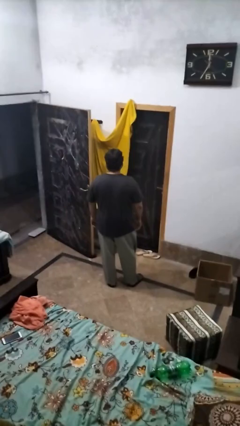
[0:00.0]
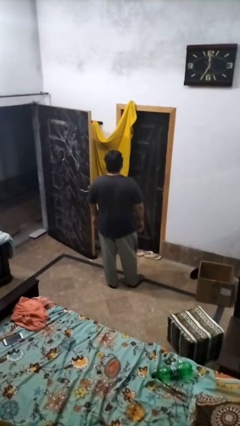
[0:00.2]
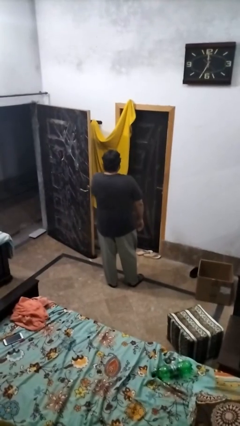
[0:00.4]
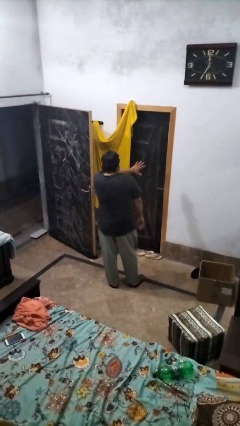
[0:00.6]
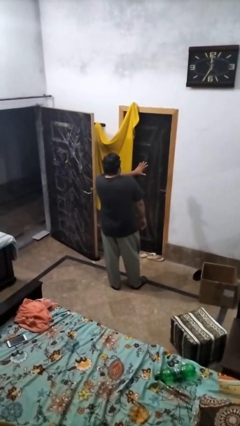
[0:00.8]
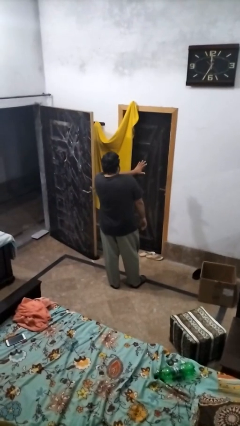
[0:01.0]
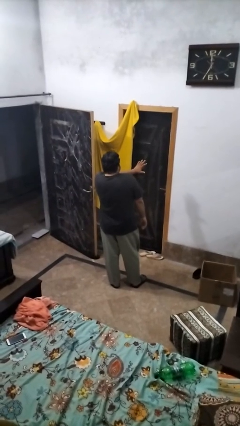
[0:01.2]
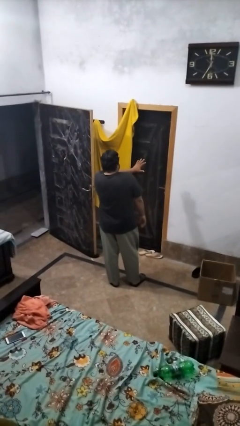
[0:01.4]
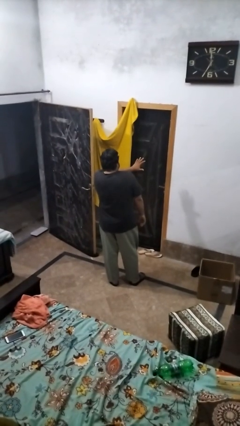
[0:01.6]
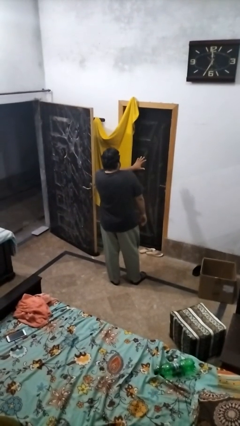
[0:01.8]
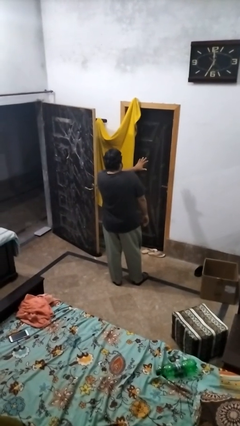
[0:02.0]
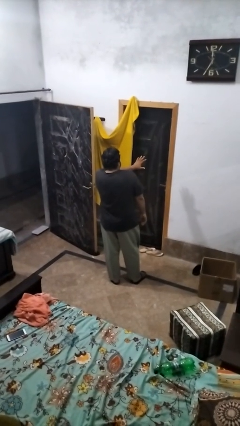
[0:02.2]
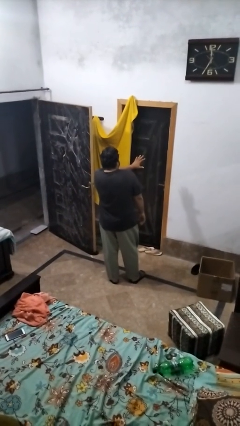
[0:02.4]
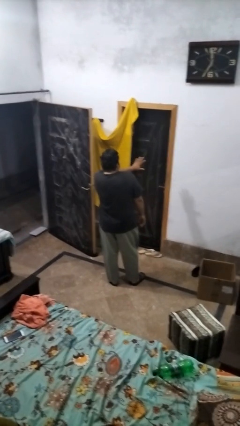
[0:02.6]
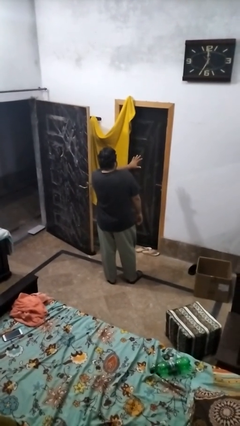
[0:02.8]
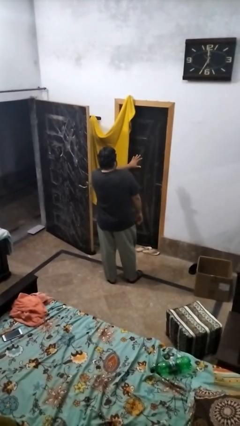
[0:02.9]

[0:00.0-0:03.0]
person gestures stop

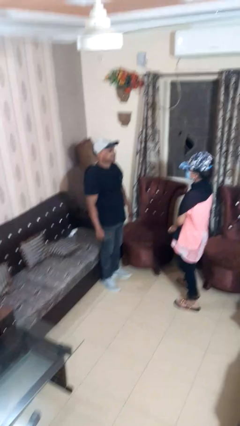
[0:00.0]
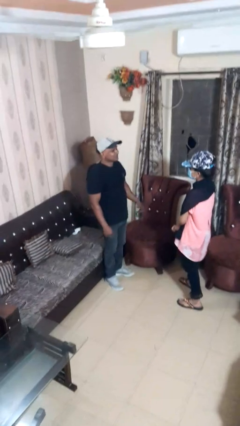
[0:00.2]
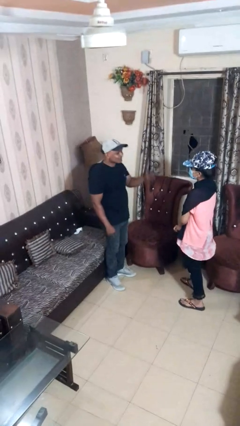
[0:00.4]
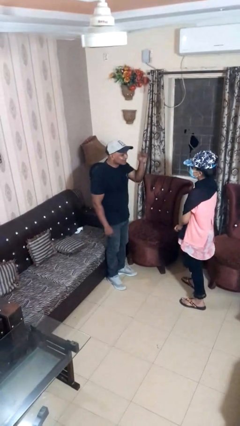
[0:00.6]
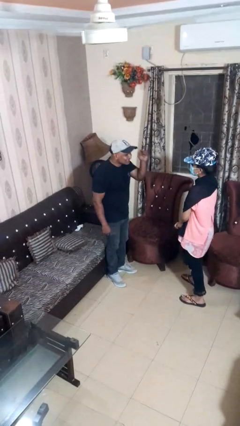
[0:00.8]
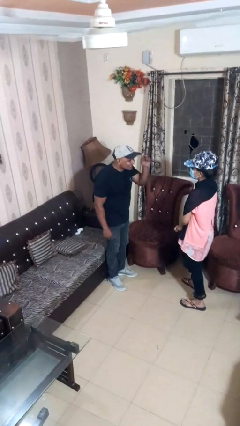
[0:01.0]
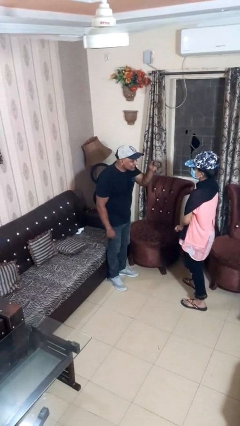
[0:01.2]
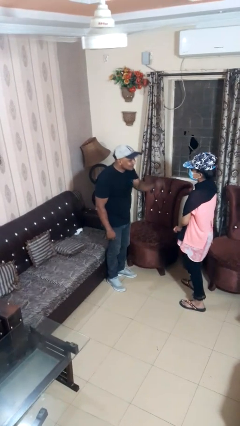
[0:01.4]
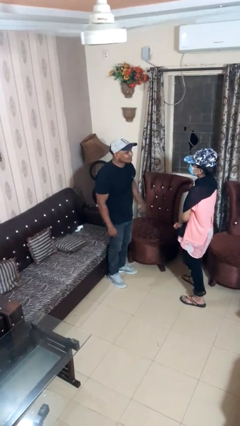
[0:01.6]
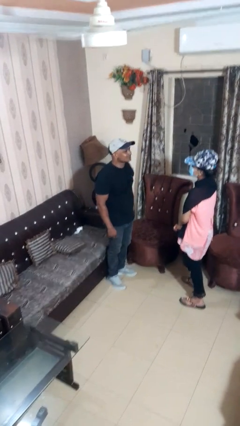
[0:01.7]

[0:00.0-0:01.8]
person points at person

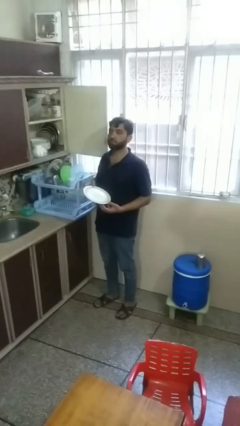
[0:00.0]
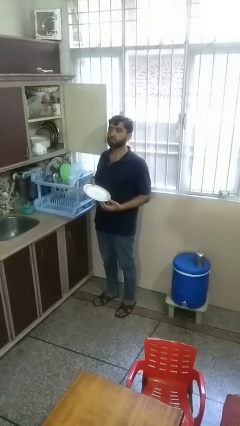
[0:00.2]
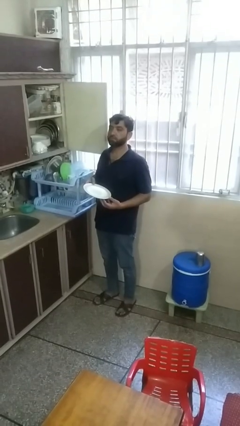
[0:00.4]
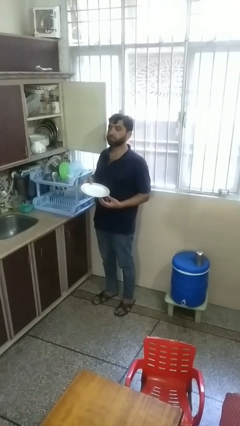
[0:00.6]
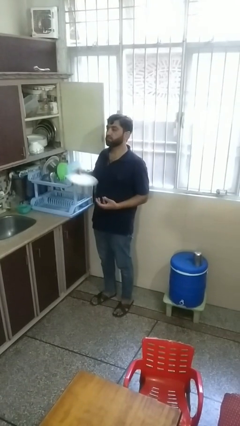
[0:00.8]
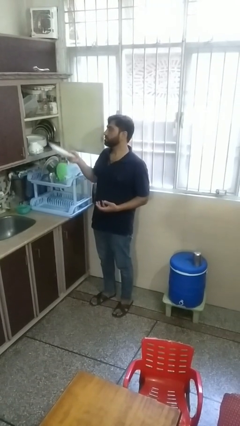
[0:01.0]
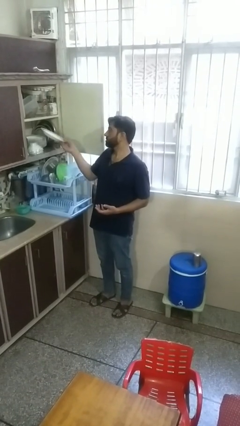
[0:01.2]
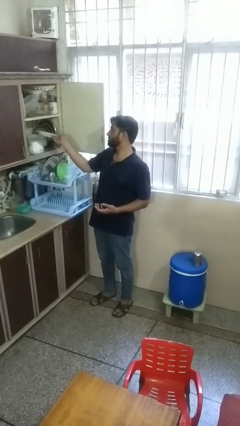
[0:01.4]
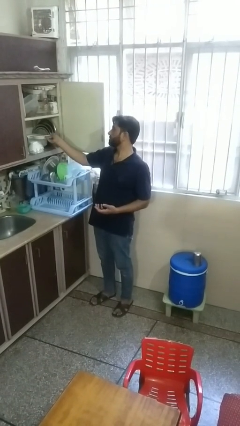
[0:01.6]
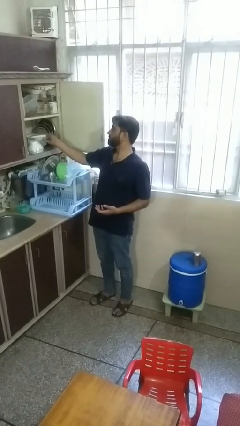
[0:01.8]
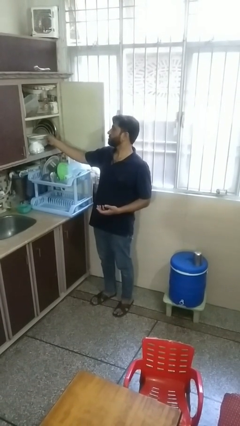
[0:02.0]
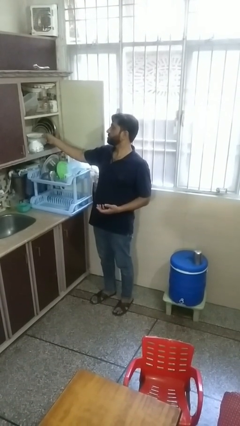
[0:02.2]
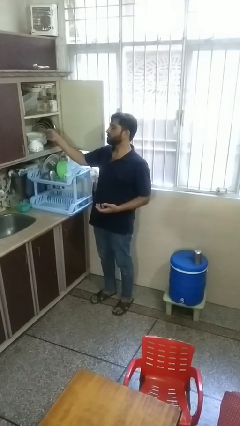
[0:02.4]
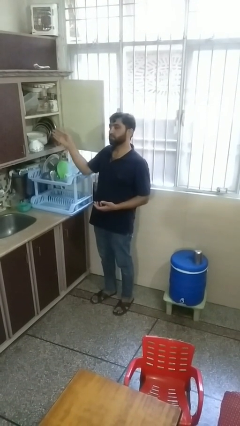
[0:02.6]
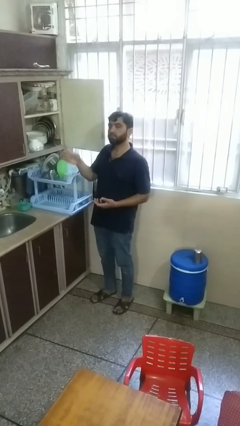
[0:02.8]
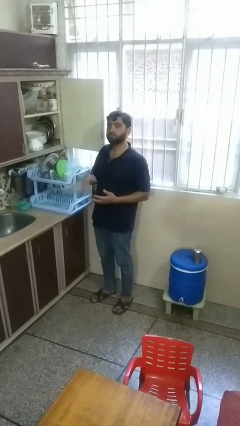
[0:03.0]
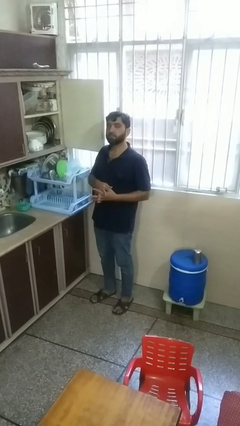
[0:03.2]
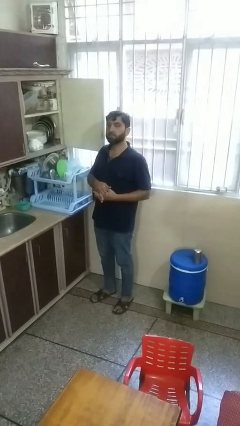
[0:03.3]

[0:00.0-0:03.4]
person puts object in cabinet

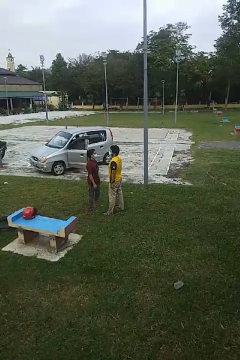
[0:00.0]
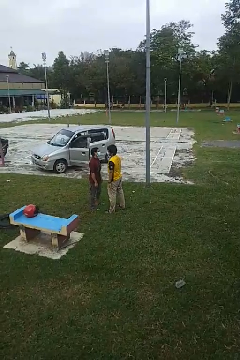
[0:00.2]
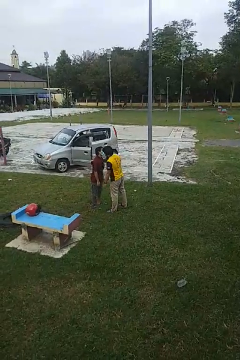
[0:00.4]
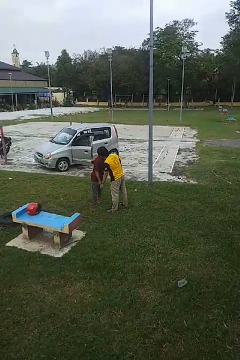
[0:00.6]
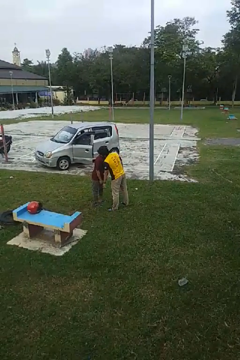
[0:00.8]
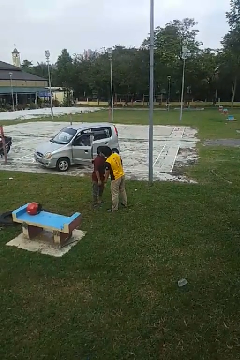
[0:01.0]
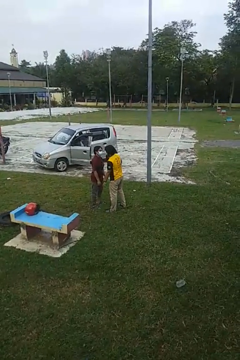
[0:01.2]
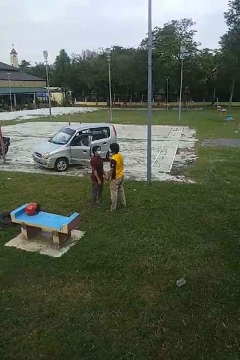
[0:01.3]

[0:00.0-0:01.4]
person kisses cheek of person

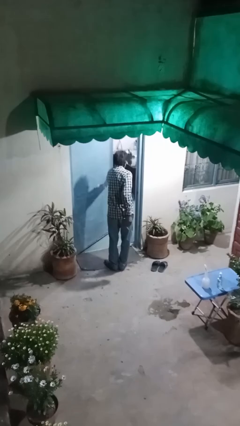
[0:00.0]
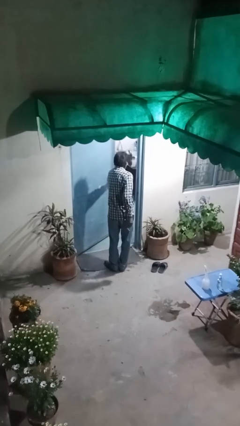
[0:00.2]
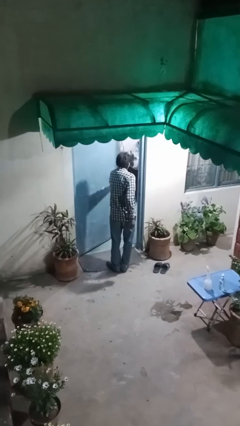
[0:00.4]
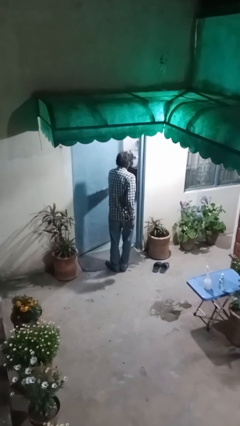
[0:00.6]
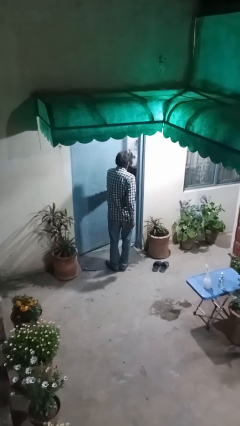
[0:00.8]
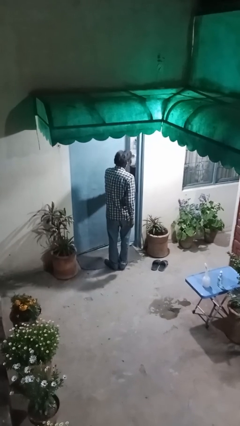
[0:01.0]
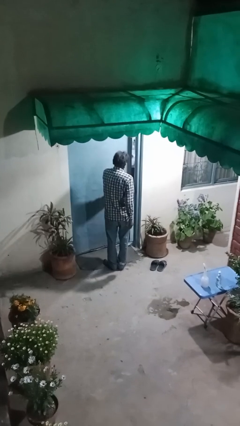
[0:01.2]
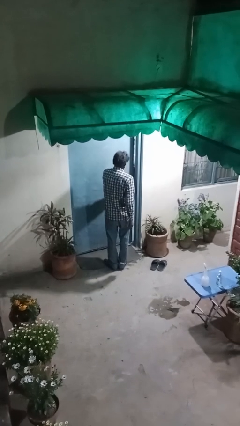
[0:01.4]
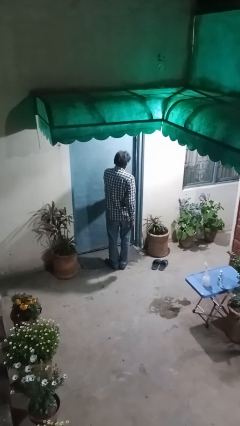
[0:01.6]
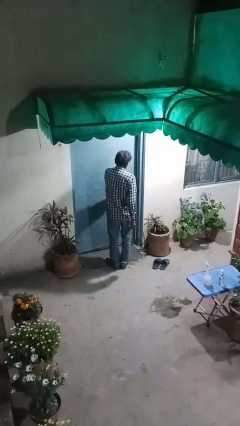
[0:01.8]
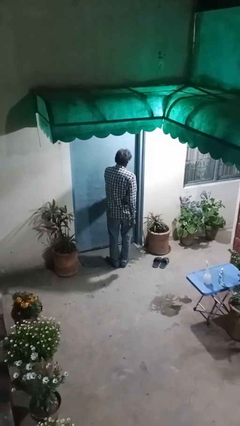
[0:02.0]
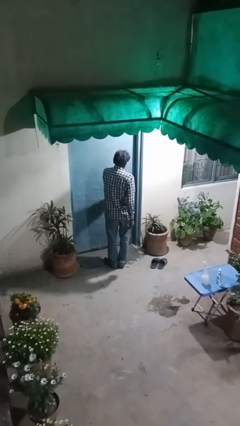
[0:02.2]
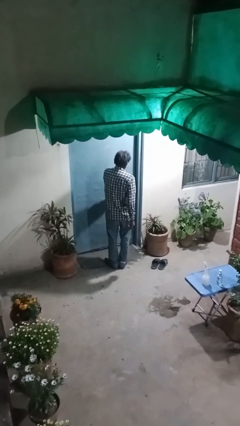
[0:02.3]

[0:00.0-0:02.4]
person closes facility door

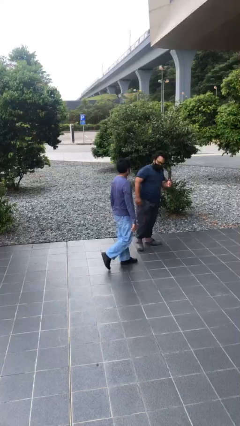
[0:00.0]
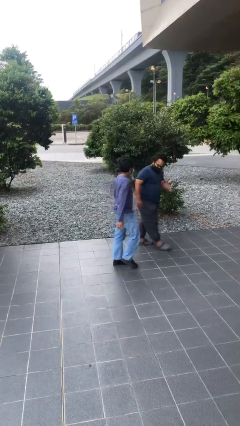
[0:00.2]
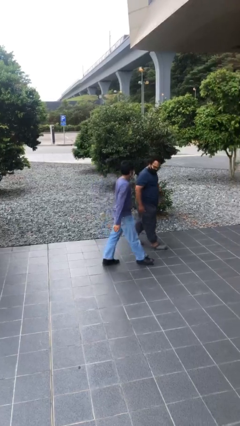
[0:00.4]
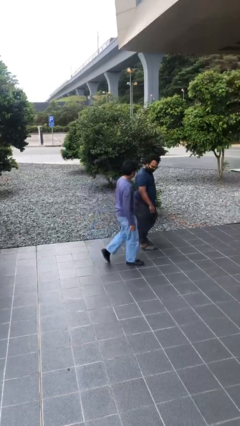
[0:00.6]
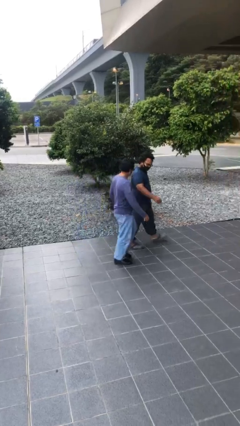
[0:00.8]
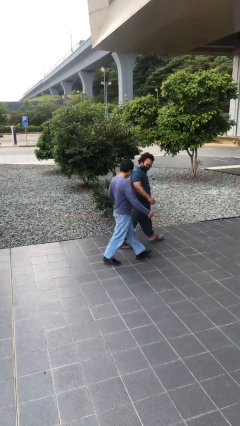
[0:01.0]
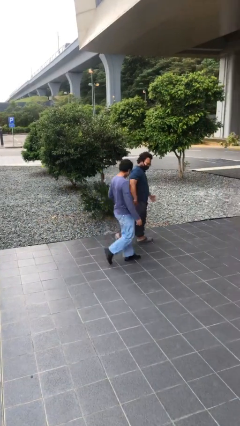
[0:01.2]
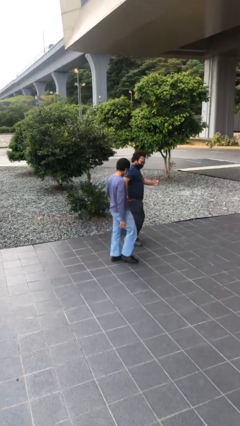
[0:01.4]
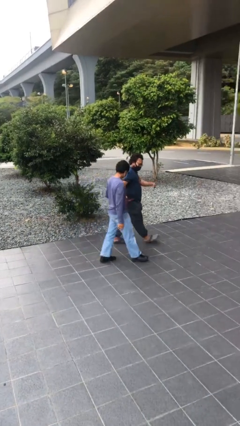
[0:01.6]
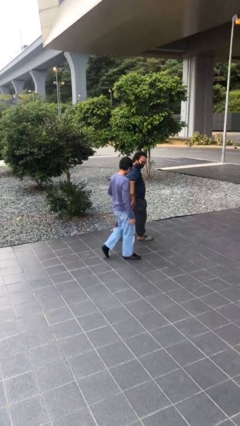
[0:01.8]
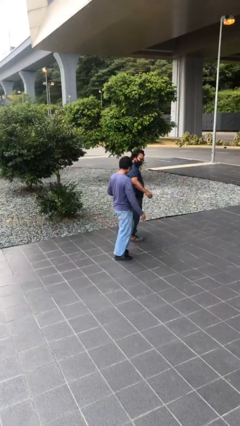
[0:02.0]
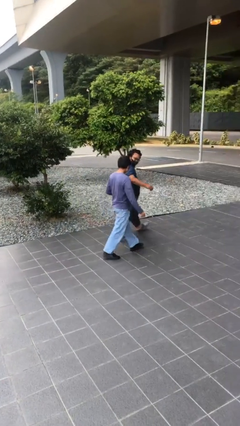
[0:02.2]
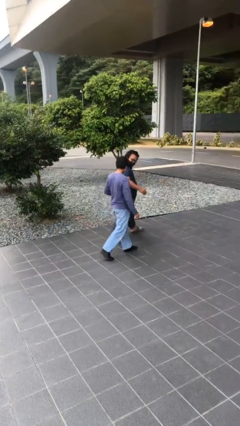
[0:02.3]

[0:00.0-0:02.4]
person talks to person

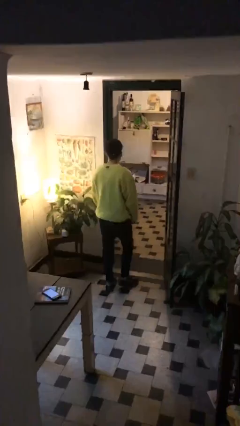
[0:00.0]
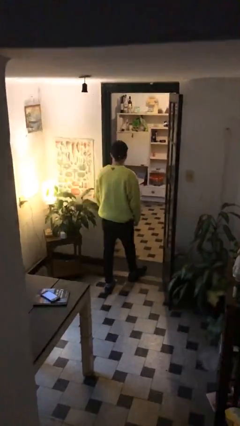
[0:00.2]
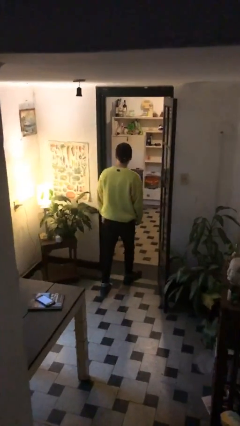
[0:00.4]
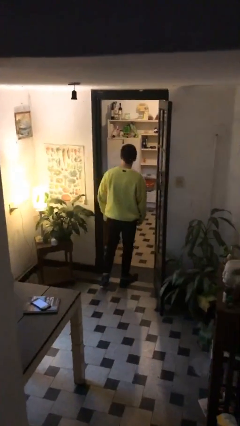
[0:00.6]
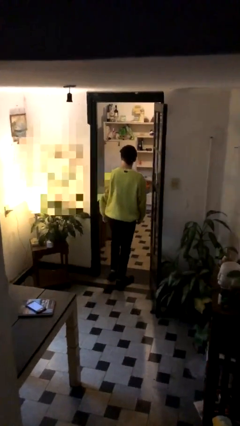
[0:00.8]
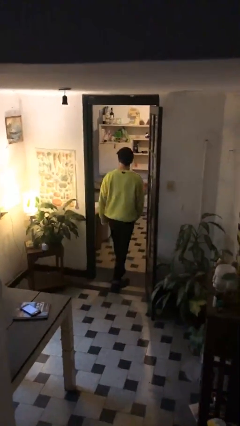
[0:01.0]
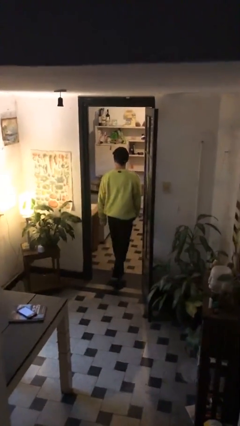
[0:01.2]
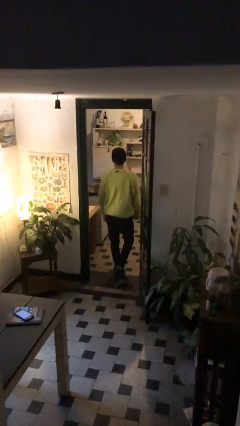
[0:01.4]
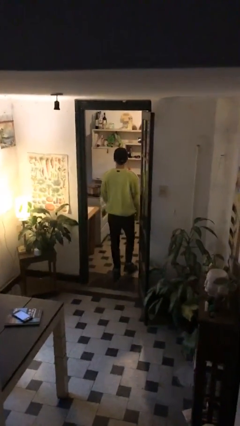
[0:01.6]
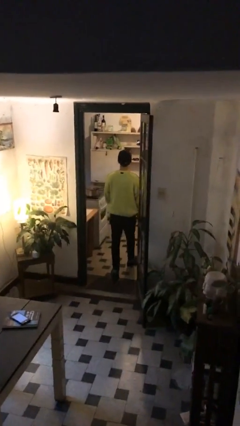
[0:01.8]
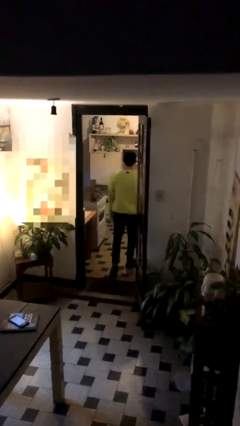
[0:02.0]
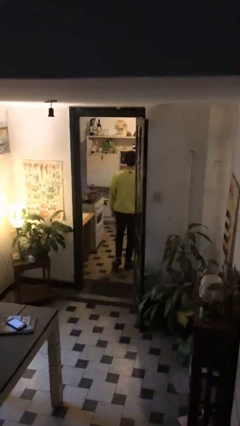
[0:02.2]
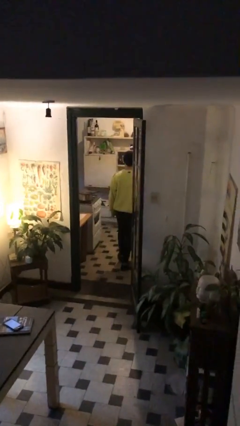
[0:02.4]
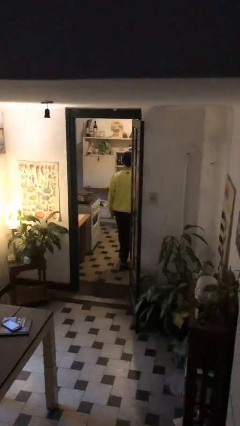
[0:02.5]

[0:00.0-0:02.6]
person exits scene through structure

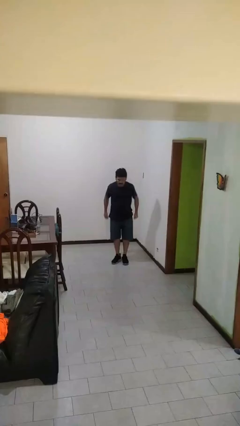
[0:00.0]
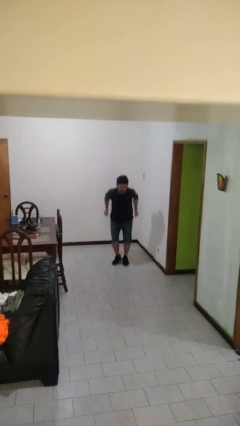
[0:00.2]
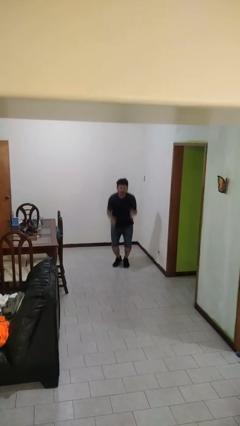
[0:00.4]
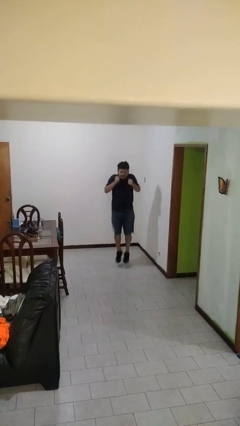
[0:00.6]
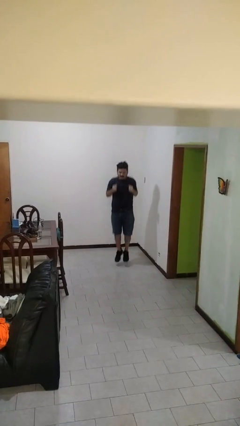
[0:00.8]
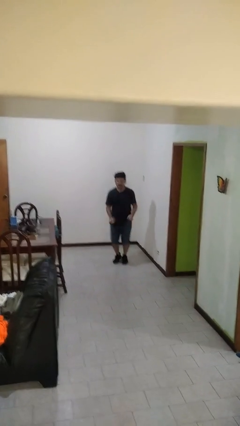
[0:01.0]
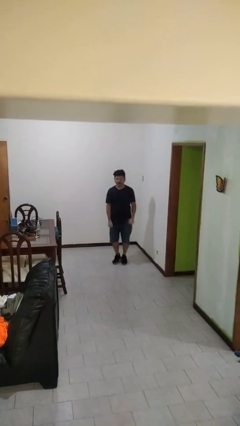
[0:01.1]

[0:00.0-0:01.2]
person jumps
